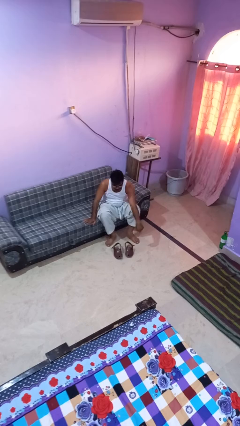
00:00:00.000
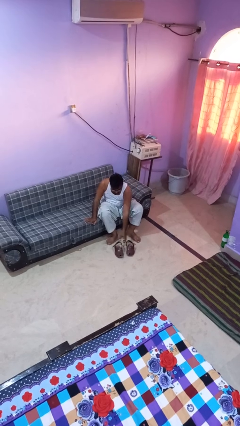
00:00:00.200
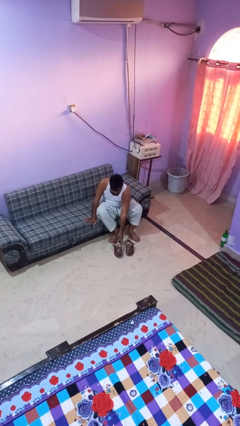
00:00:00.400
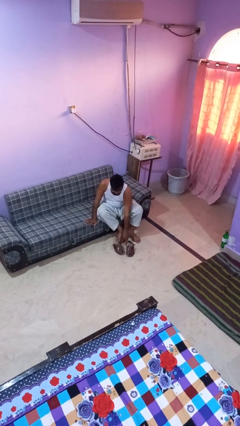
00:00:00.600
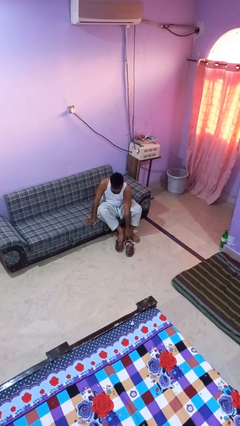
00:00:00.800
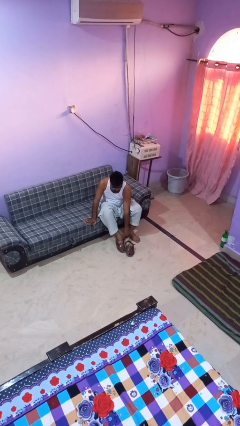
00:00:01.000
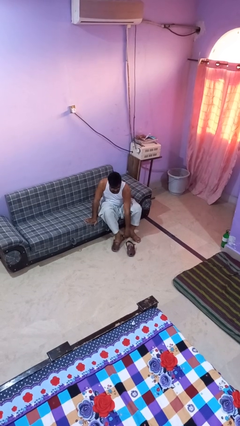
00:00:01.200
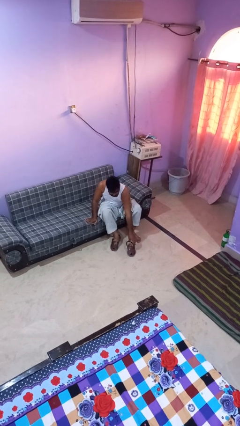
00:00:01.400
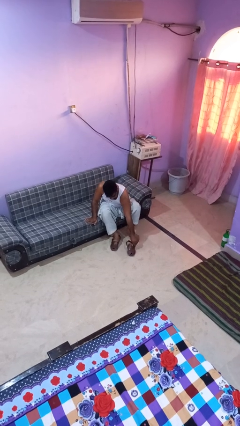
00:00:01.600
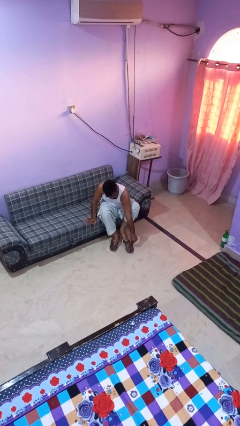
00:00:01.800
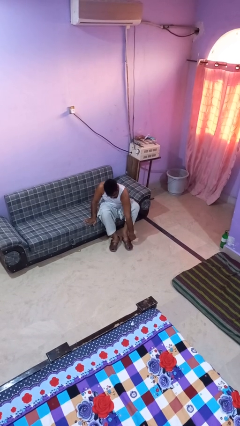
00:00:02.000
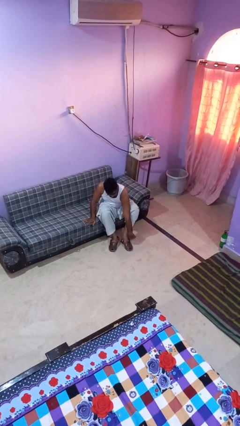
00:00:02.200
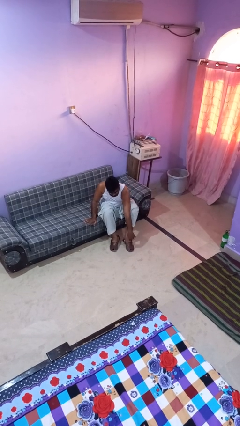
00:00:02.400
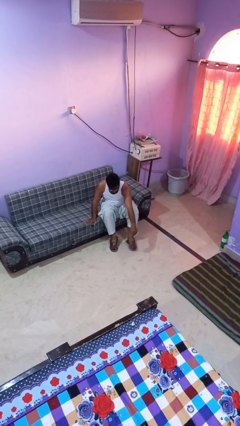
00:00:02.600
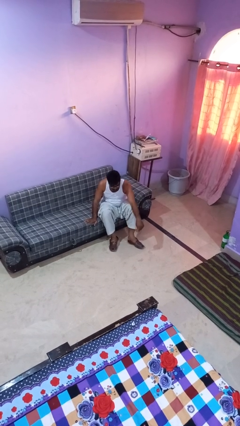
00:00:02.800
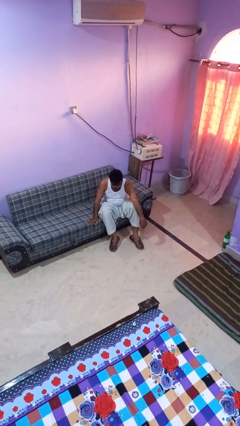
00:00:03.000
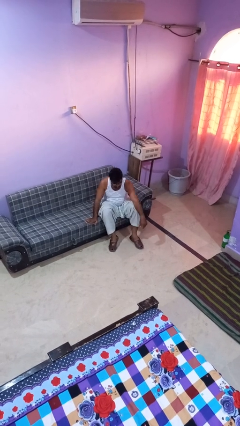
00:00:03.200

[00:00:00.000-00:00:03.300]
person puts on shoes

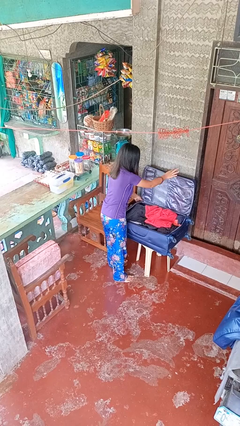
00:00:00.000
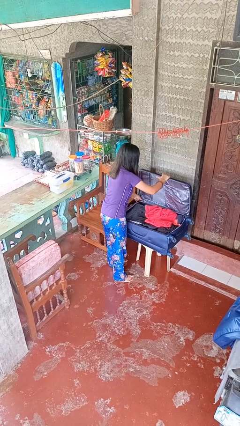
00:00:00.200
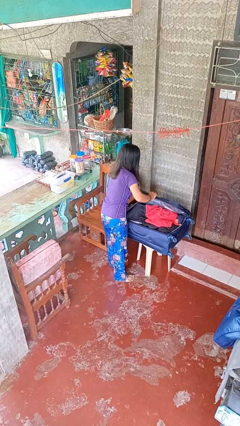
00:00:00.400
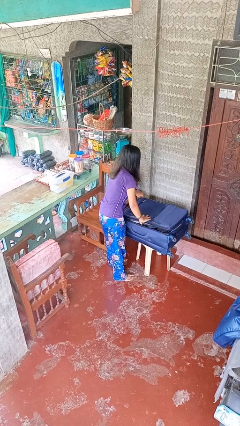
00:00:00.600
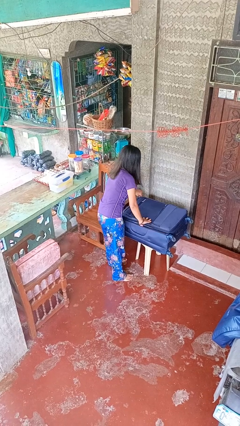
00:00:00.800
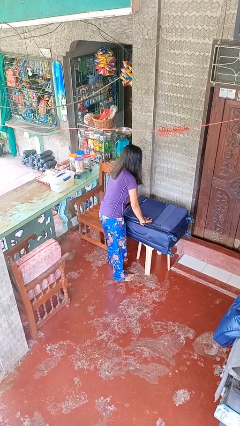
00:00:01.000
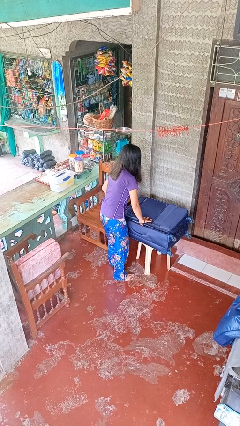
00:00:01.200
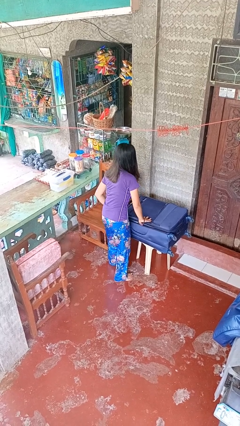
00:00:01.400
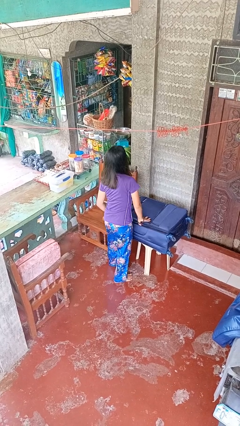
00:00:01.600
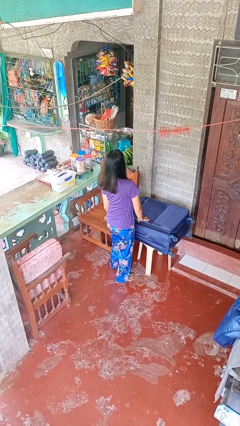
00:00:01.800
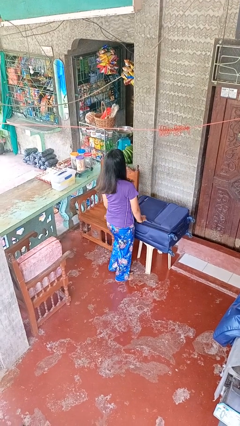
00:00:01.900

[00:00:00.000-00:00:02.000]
person closes suitcase

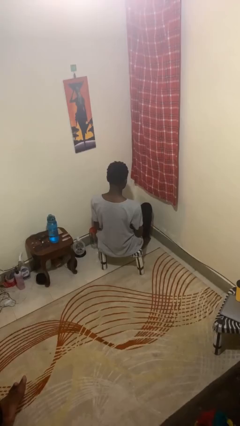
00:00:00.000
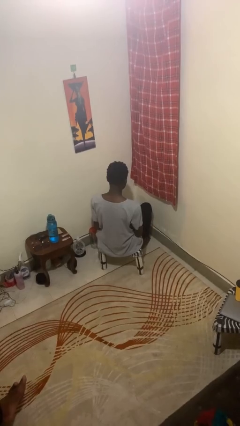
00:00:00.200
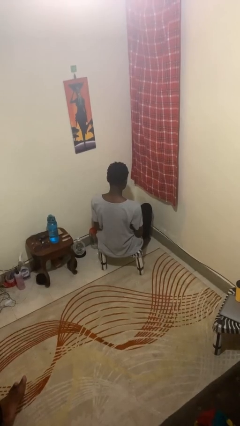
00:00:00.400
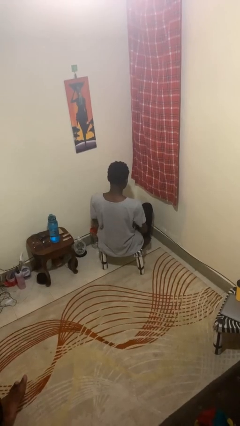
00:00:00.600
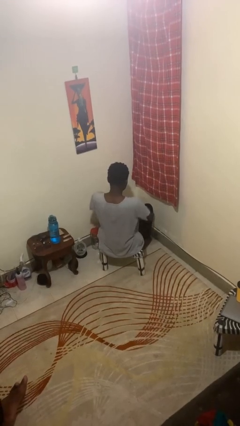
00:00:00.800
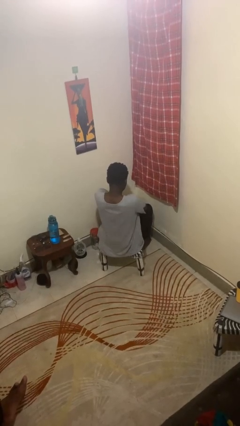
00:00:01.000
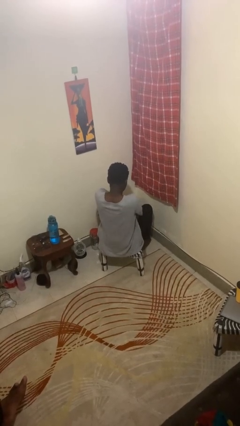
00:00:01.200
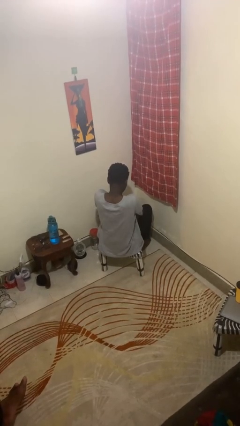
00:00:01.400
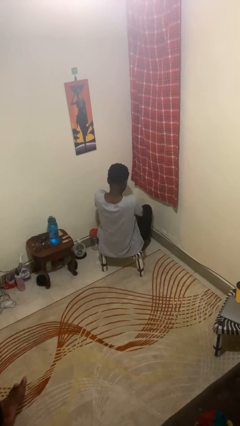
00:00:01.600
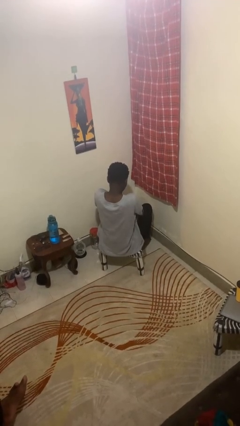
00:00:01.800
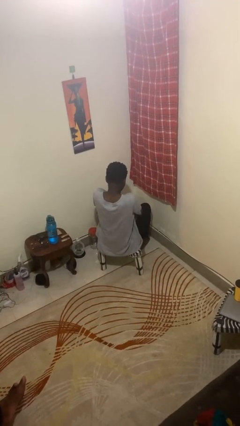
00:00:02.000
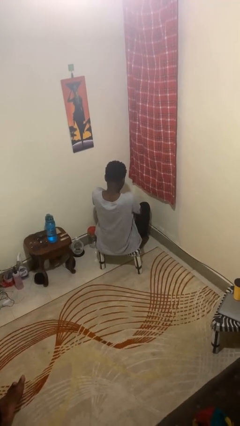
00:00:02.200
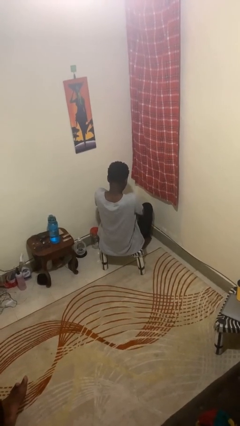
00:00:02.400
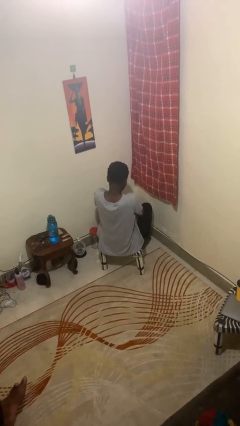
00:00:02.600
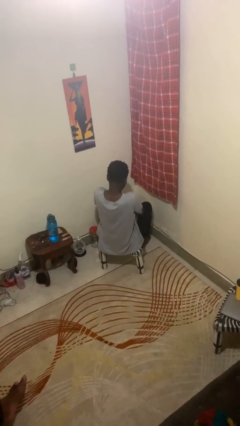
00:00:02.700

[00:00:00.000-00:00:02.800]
person crosses arms

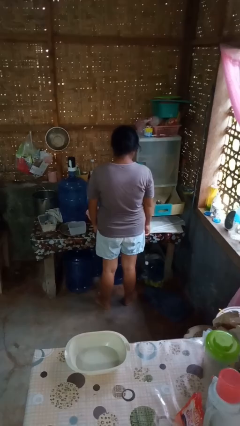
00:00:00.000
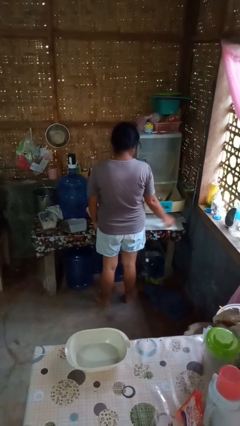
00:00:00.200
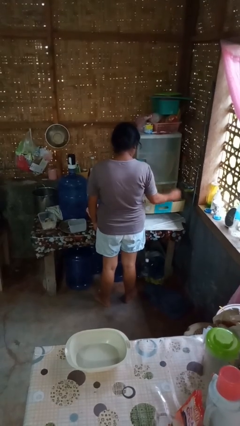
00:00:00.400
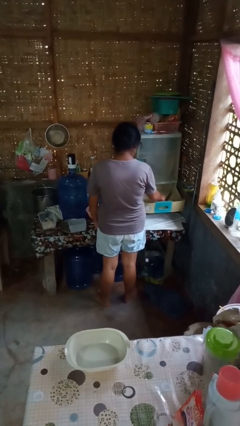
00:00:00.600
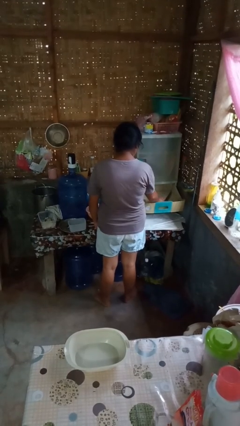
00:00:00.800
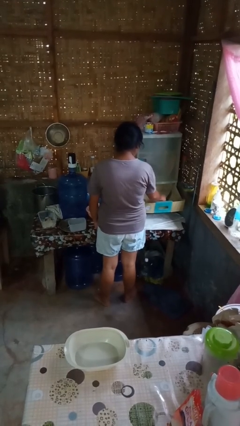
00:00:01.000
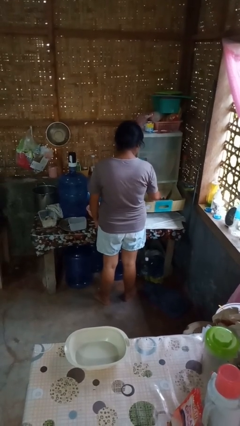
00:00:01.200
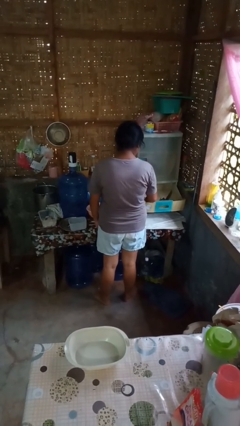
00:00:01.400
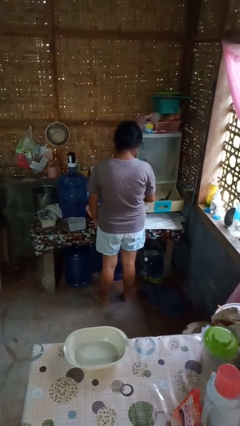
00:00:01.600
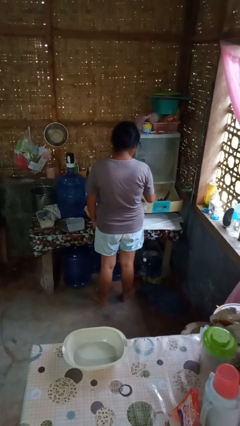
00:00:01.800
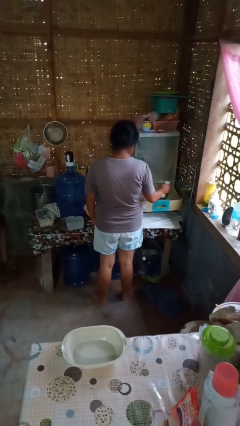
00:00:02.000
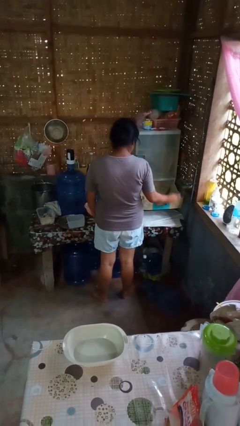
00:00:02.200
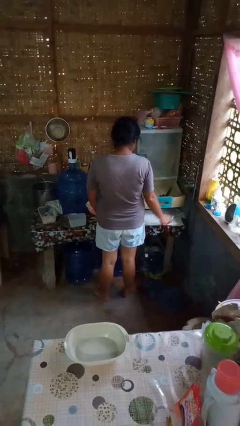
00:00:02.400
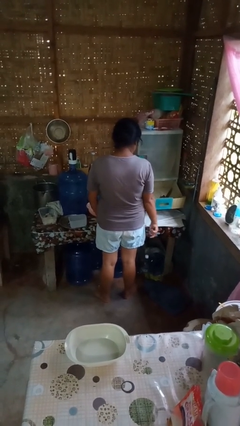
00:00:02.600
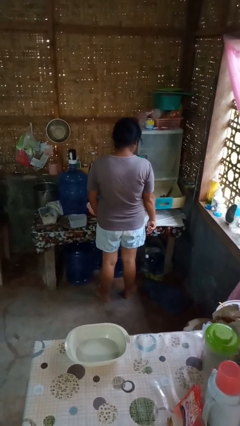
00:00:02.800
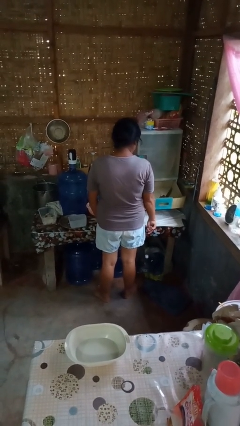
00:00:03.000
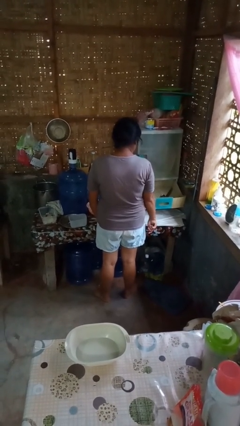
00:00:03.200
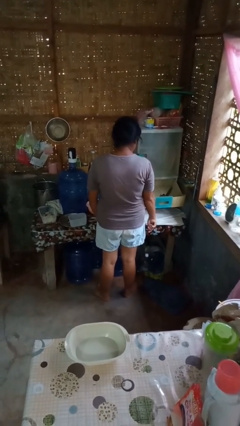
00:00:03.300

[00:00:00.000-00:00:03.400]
person takes object from kitchen drawer

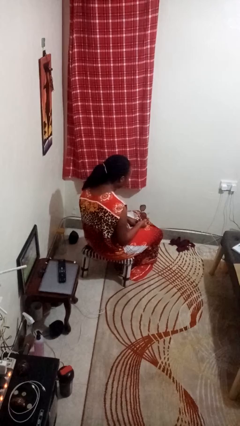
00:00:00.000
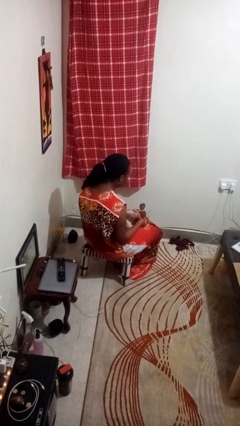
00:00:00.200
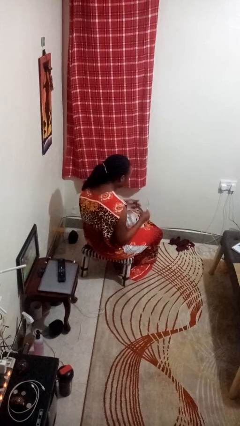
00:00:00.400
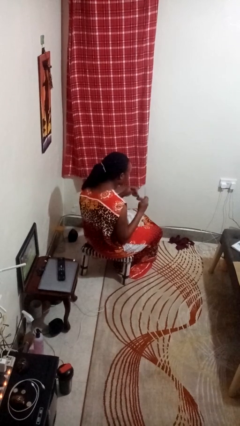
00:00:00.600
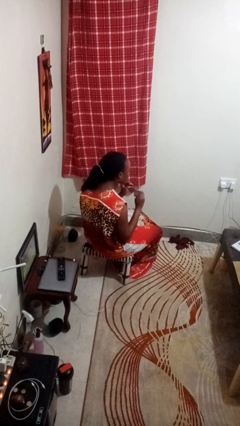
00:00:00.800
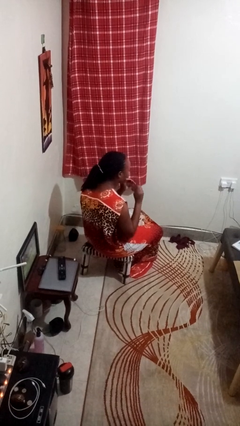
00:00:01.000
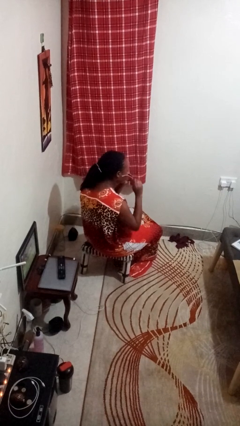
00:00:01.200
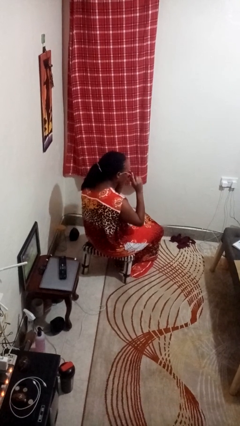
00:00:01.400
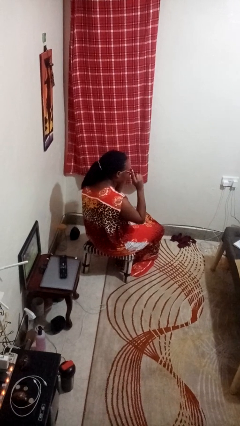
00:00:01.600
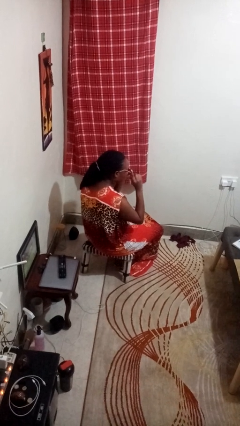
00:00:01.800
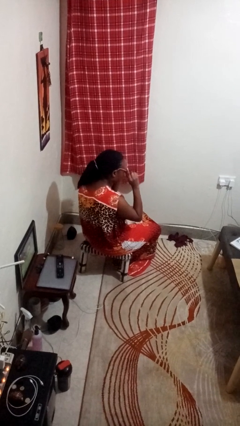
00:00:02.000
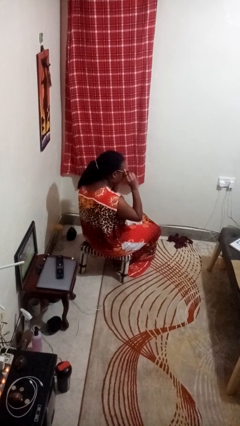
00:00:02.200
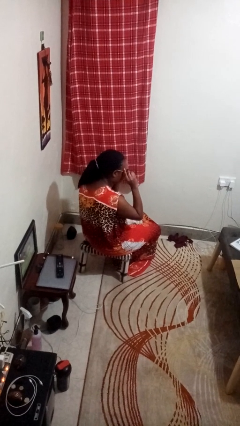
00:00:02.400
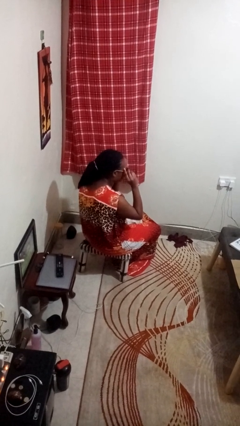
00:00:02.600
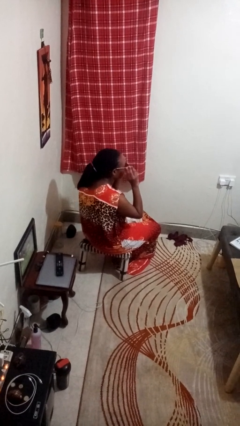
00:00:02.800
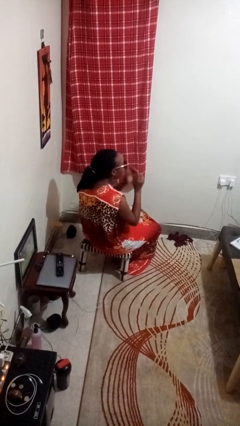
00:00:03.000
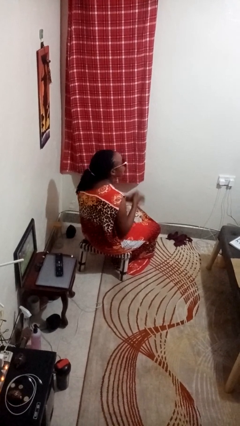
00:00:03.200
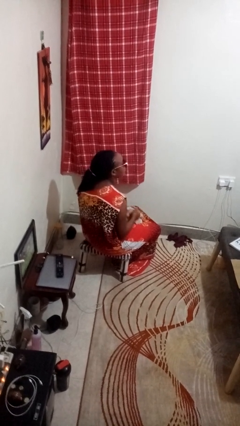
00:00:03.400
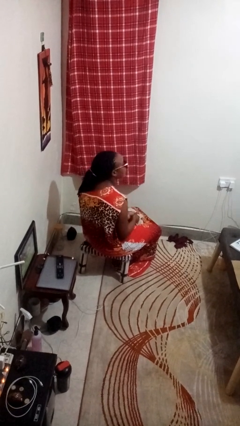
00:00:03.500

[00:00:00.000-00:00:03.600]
person puts on sunglasses

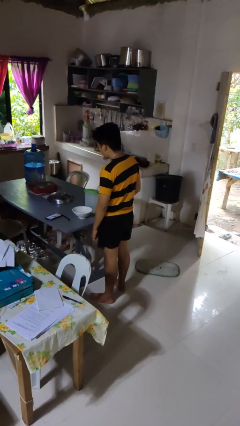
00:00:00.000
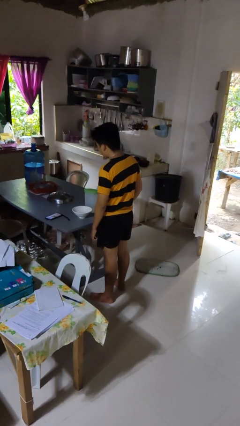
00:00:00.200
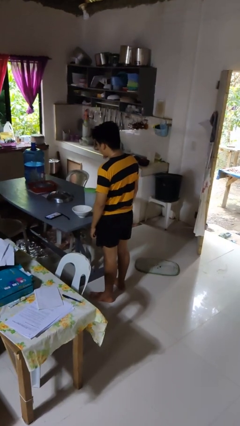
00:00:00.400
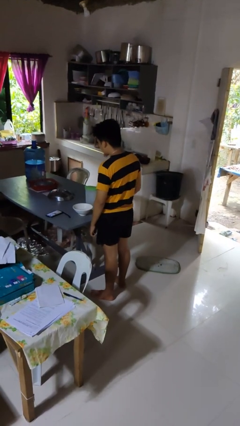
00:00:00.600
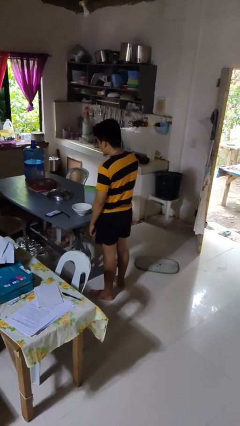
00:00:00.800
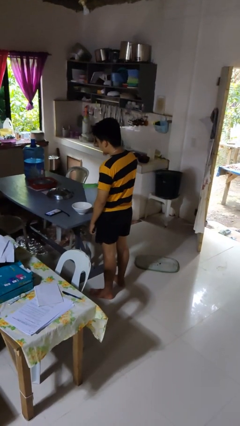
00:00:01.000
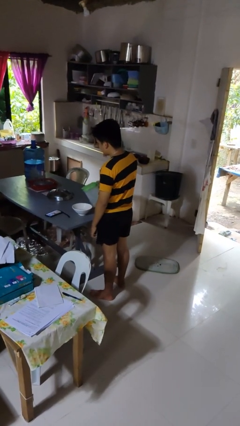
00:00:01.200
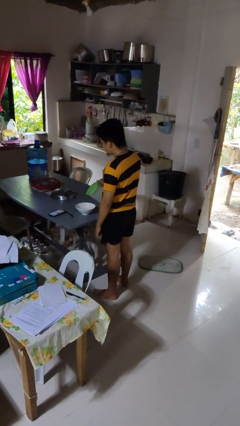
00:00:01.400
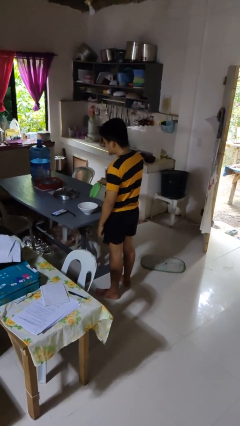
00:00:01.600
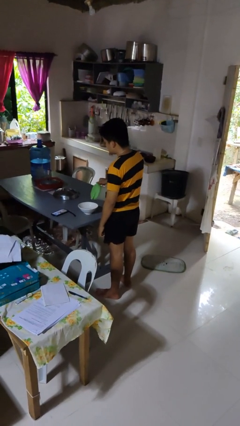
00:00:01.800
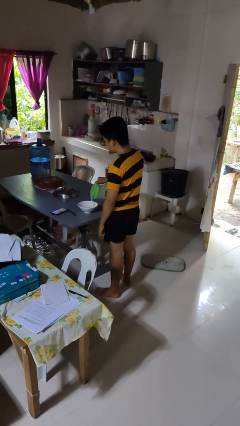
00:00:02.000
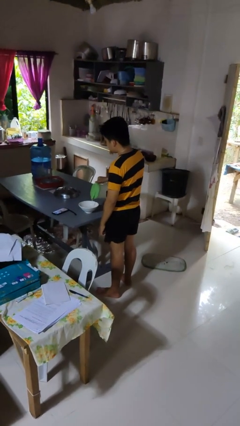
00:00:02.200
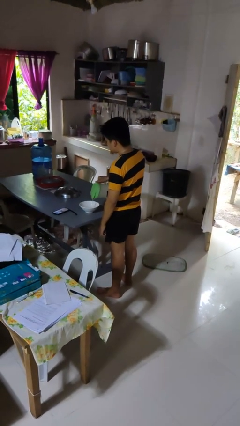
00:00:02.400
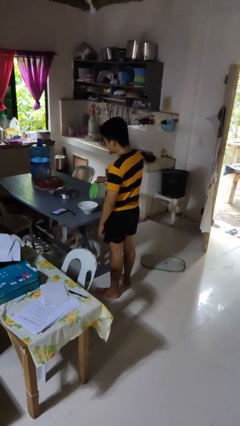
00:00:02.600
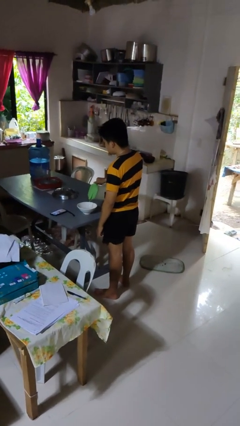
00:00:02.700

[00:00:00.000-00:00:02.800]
person pours into bowl
